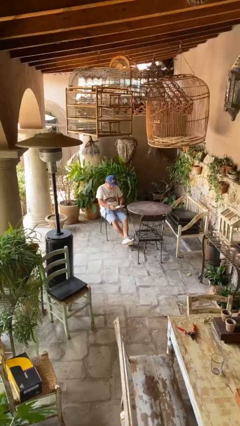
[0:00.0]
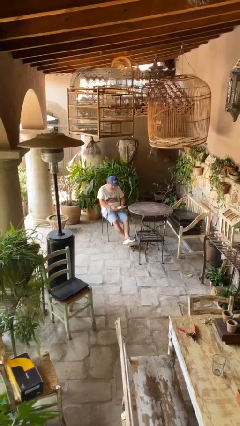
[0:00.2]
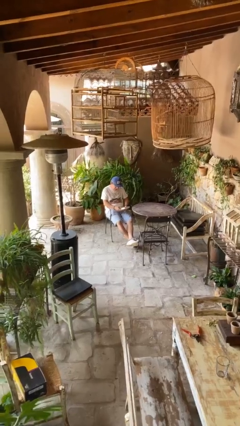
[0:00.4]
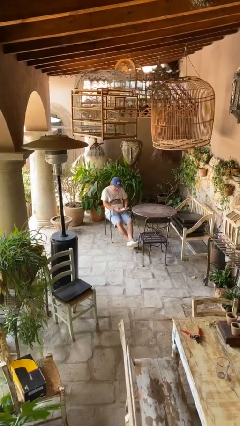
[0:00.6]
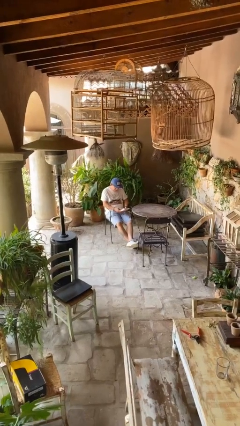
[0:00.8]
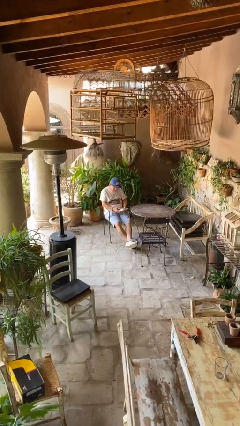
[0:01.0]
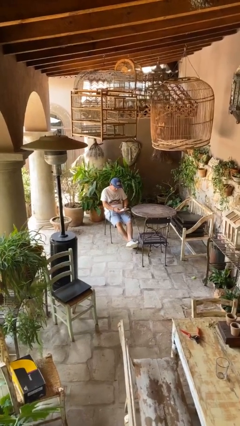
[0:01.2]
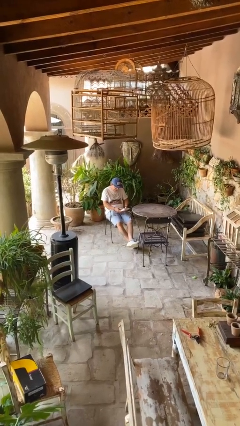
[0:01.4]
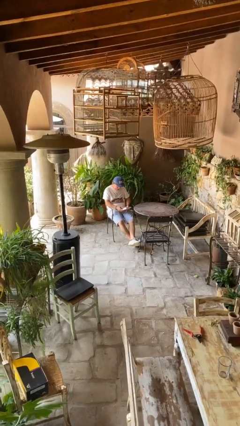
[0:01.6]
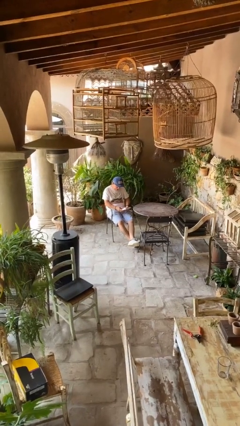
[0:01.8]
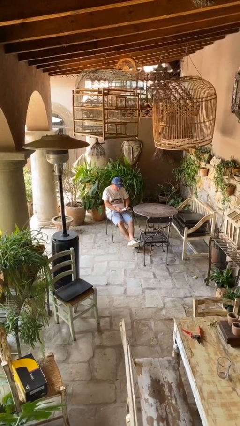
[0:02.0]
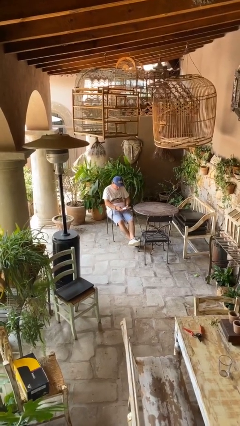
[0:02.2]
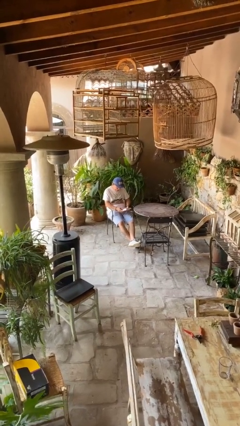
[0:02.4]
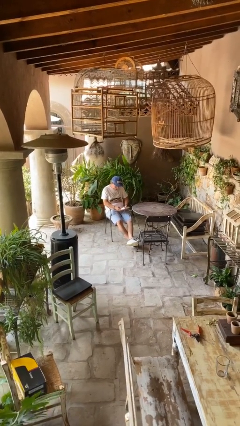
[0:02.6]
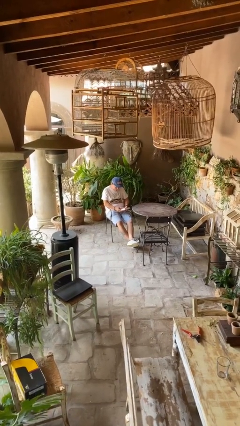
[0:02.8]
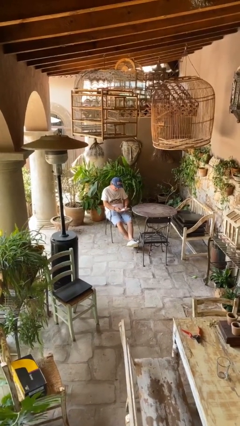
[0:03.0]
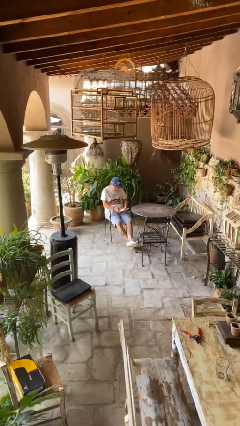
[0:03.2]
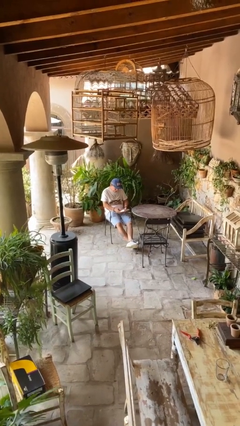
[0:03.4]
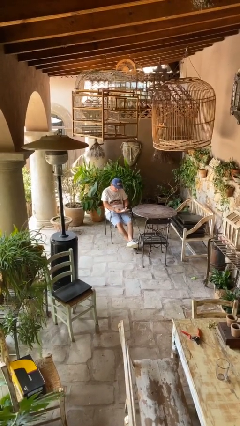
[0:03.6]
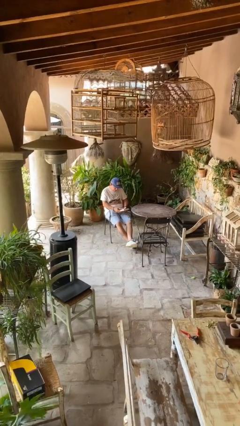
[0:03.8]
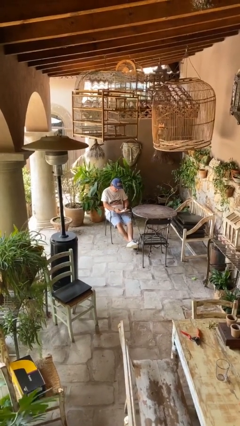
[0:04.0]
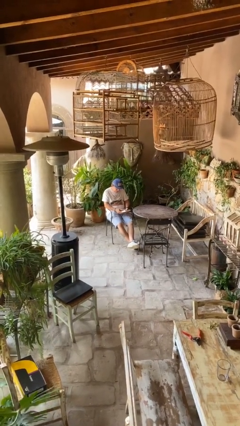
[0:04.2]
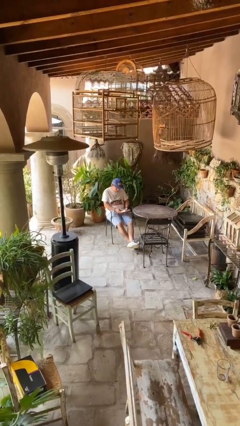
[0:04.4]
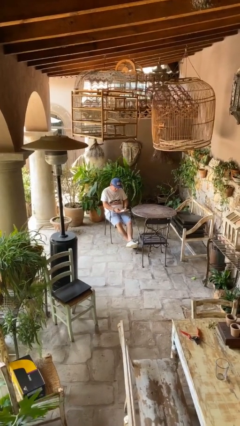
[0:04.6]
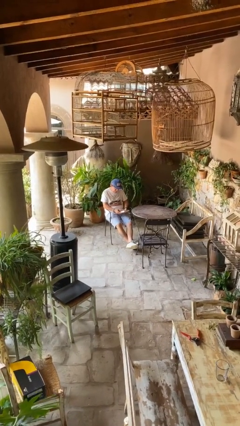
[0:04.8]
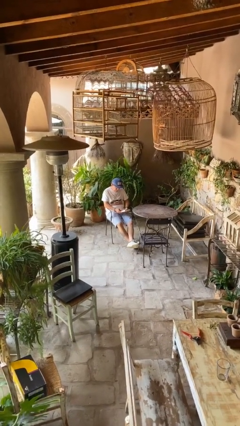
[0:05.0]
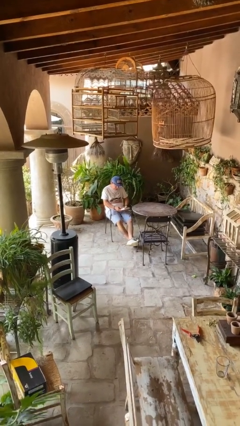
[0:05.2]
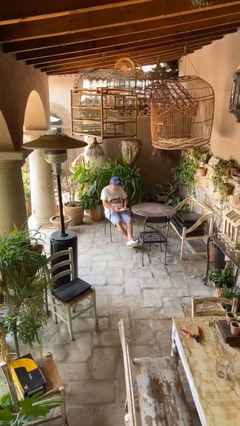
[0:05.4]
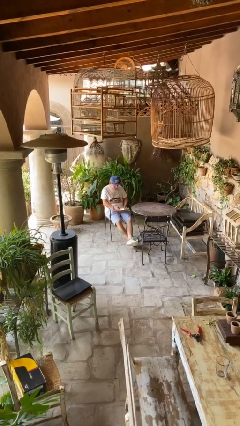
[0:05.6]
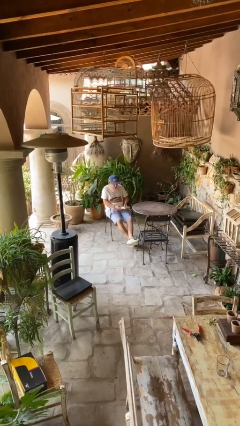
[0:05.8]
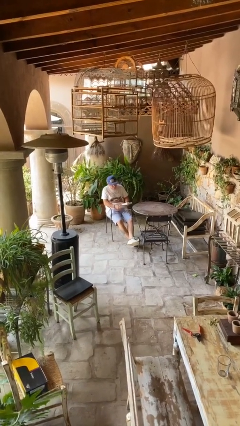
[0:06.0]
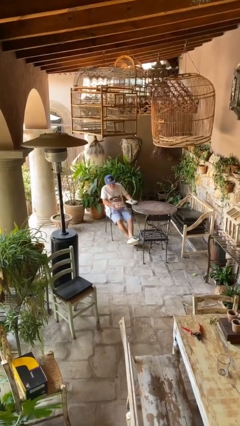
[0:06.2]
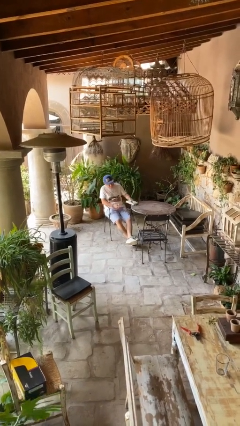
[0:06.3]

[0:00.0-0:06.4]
person reads document

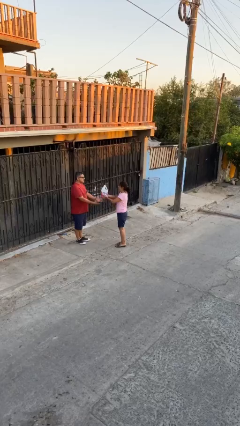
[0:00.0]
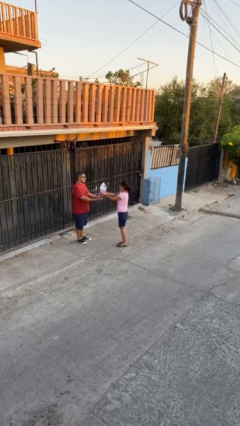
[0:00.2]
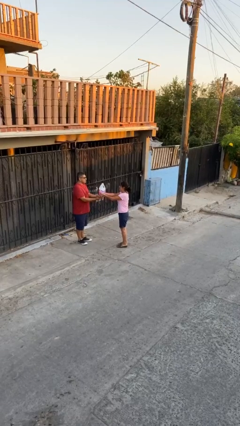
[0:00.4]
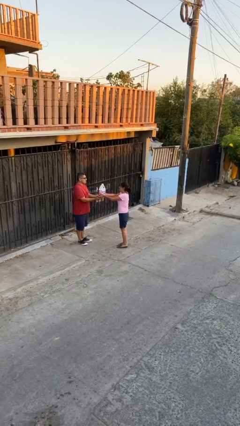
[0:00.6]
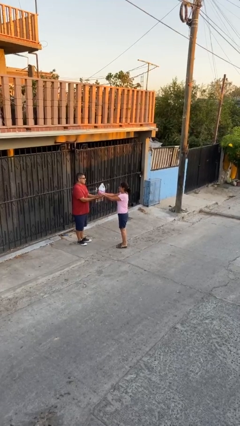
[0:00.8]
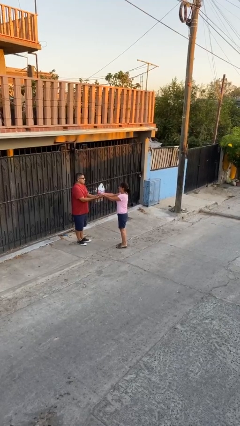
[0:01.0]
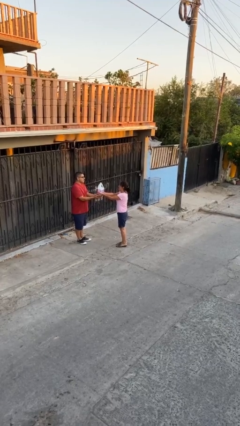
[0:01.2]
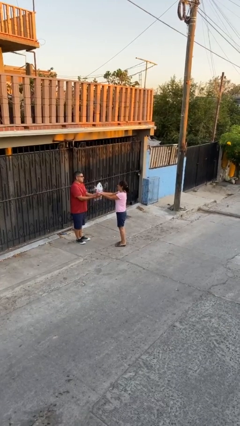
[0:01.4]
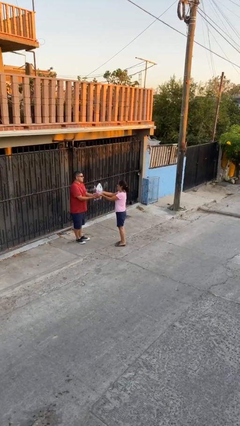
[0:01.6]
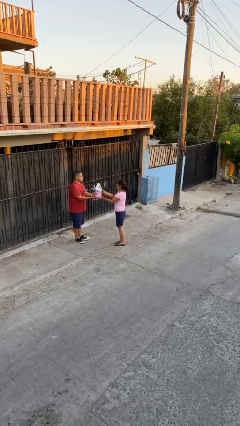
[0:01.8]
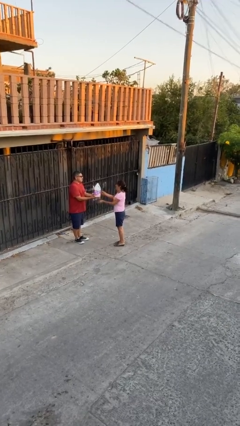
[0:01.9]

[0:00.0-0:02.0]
person transfers object to person

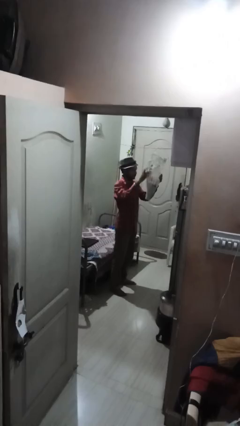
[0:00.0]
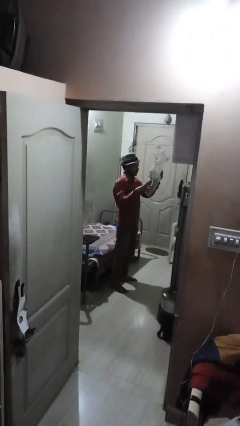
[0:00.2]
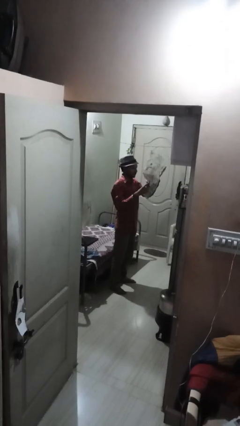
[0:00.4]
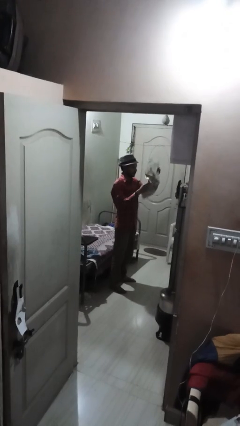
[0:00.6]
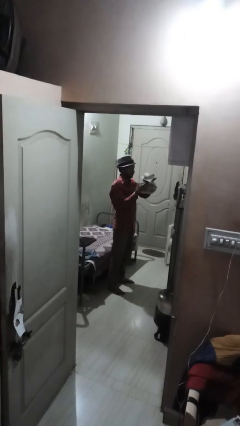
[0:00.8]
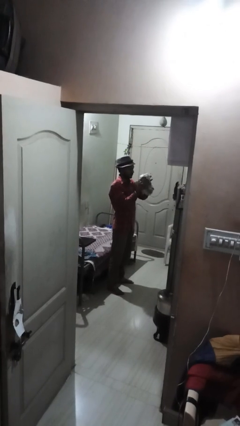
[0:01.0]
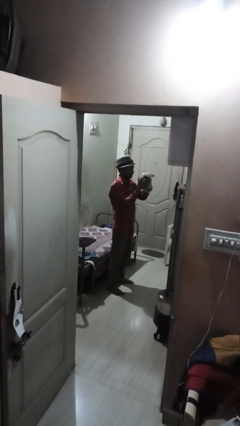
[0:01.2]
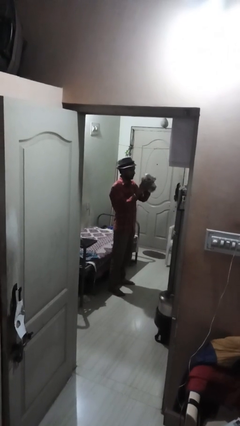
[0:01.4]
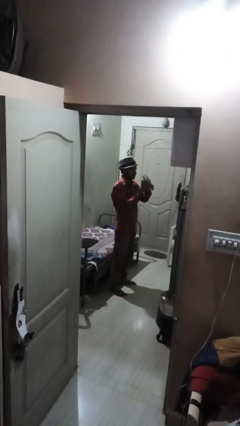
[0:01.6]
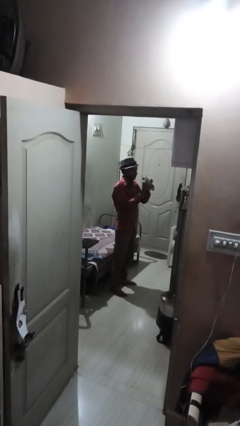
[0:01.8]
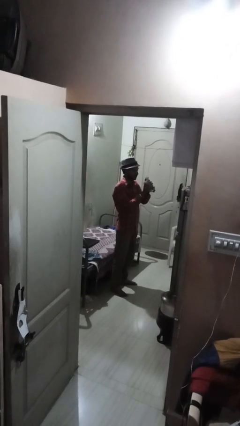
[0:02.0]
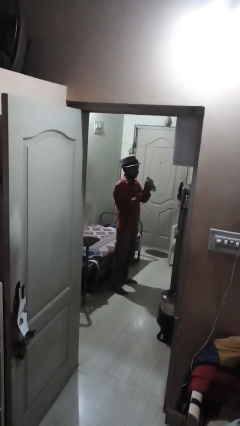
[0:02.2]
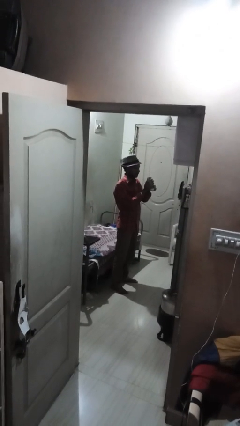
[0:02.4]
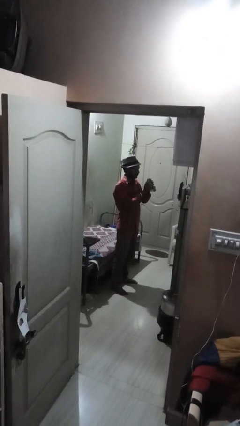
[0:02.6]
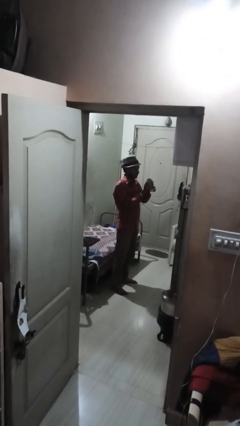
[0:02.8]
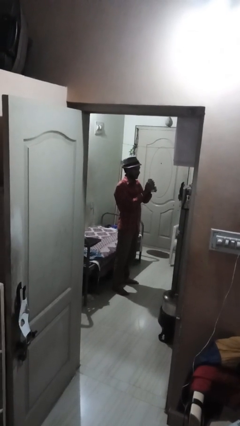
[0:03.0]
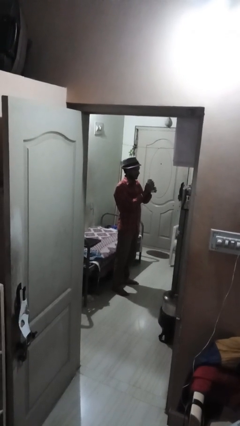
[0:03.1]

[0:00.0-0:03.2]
person crumples paper

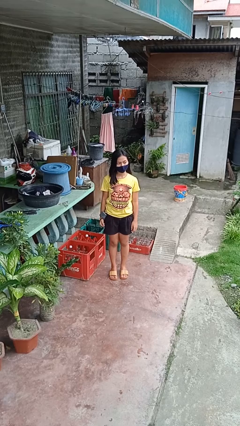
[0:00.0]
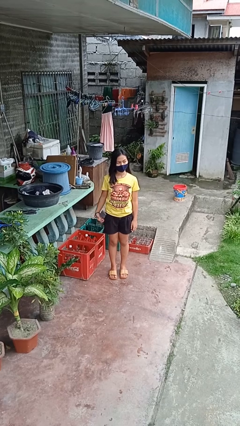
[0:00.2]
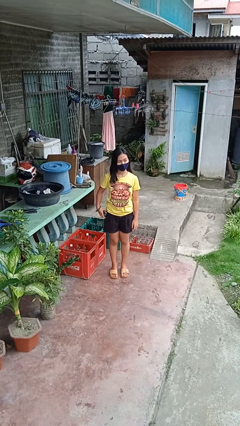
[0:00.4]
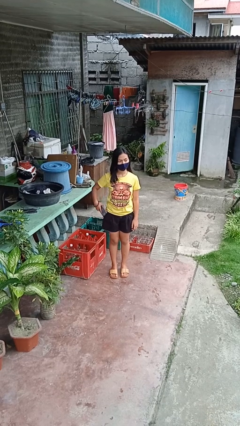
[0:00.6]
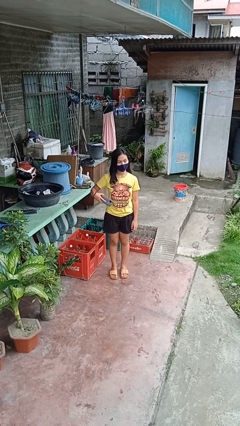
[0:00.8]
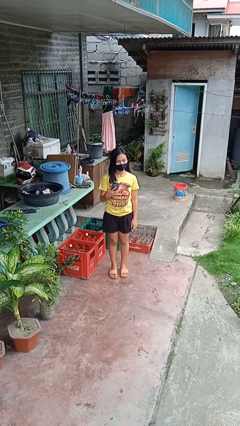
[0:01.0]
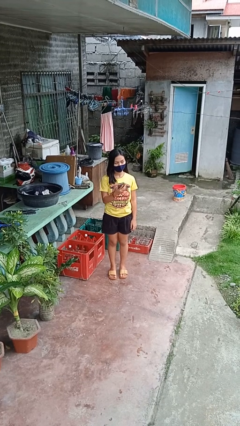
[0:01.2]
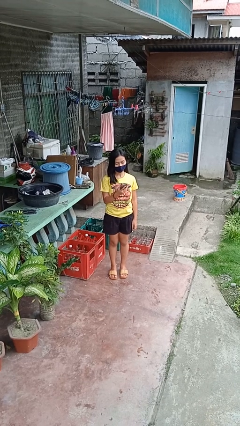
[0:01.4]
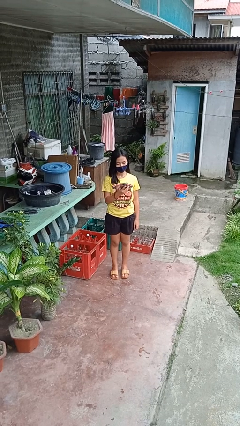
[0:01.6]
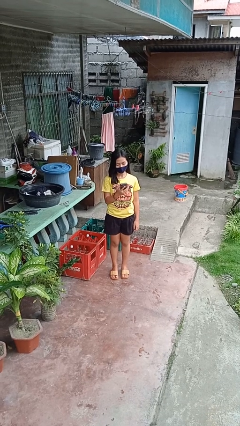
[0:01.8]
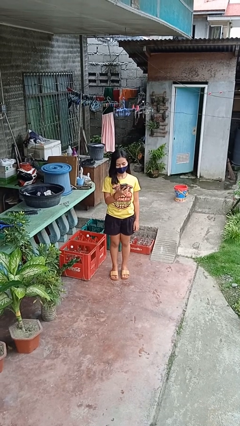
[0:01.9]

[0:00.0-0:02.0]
person takes phone from pocket

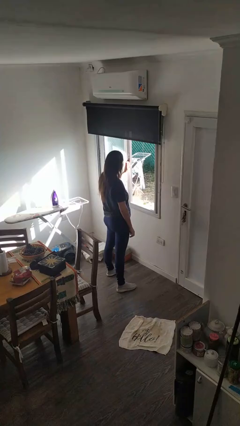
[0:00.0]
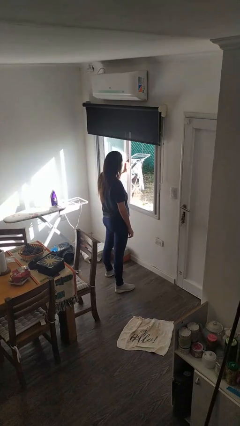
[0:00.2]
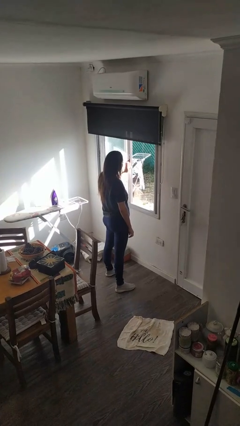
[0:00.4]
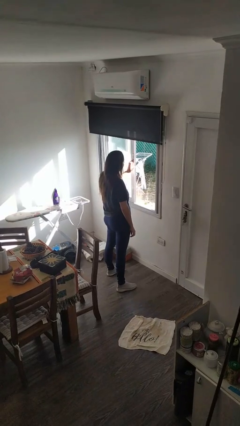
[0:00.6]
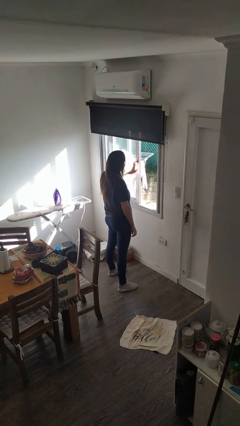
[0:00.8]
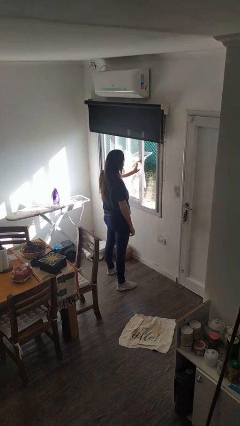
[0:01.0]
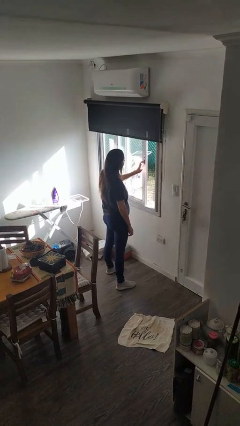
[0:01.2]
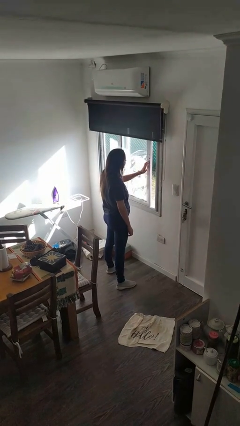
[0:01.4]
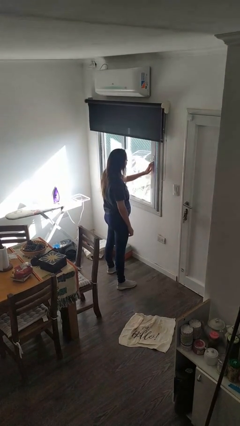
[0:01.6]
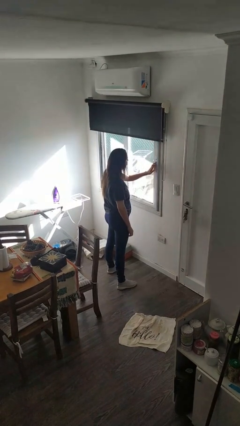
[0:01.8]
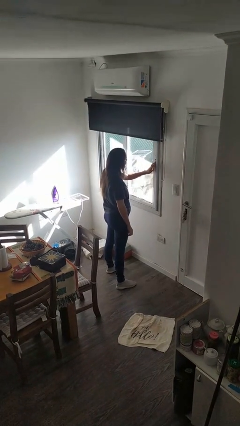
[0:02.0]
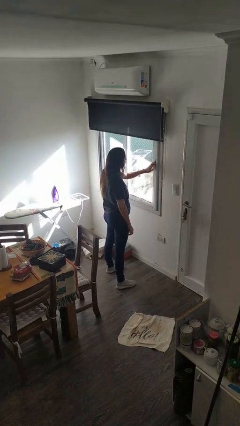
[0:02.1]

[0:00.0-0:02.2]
person closes home window

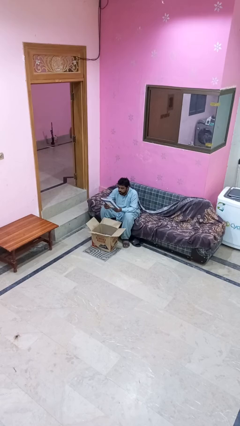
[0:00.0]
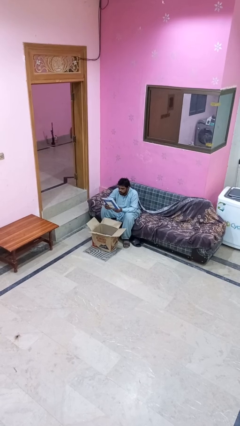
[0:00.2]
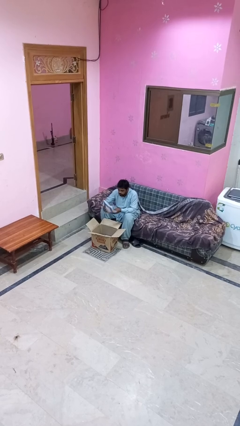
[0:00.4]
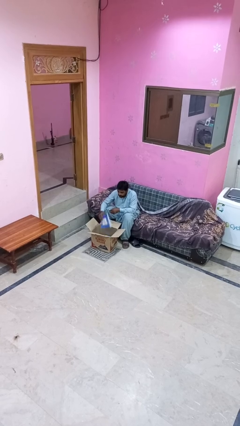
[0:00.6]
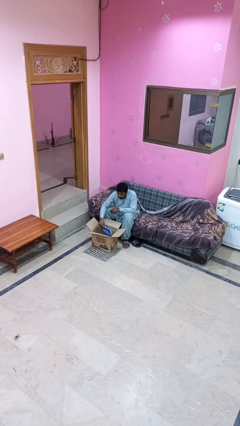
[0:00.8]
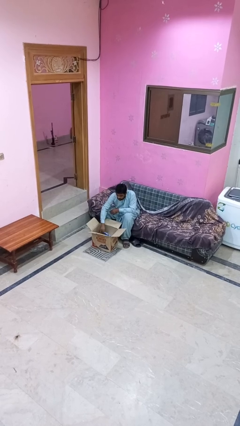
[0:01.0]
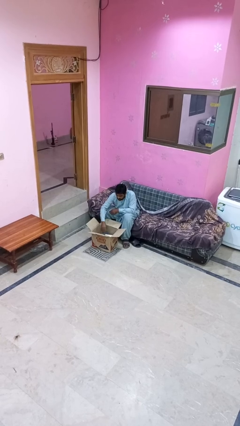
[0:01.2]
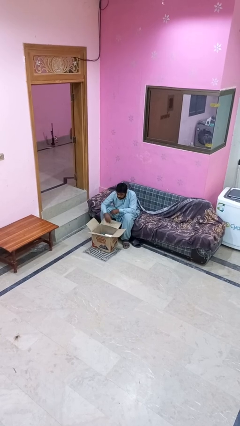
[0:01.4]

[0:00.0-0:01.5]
person puts object into box

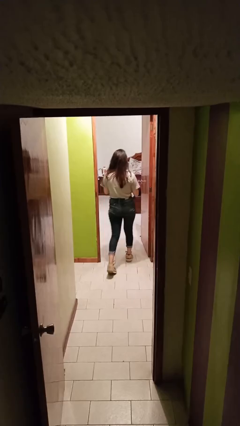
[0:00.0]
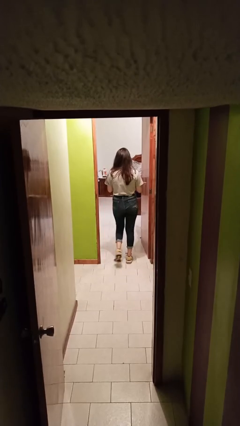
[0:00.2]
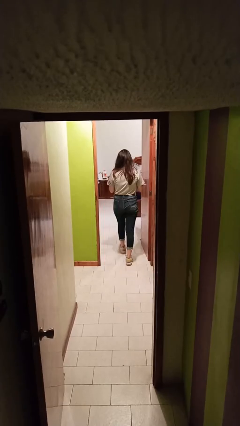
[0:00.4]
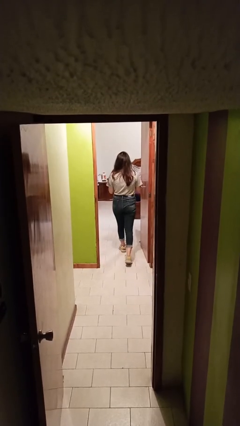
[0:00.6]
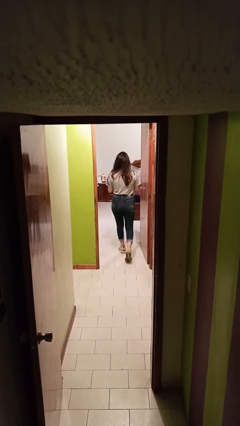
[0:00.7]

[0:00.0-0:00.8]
person exits scene through structure
